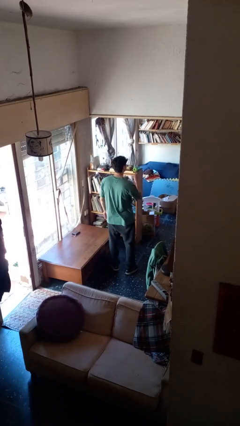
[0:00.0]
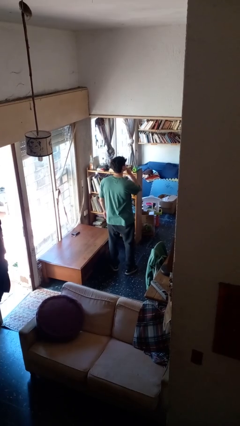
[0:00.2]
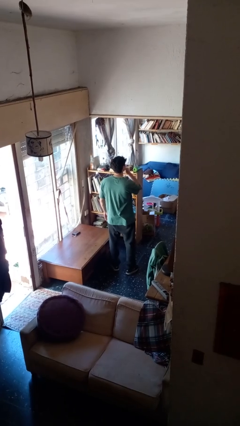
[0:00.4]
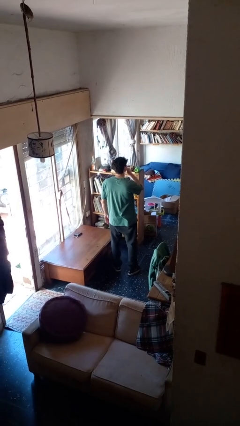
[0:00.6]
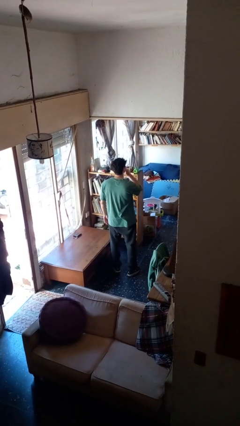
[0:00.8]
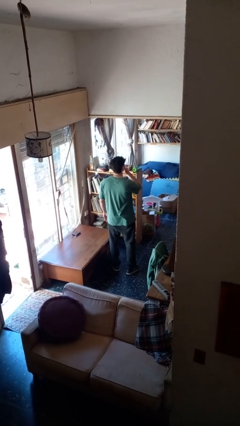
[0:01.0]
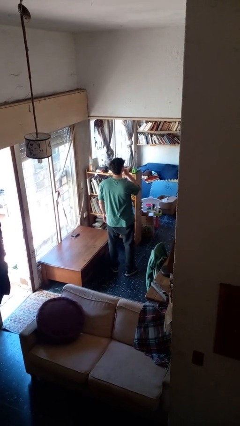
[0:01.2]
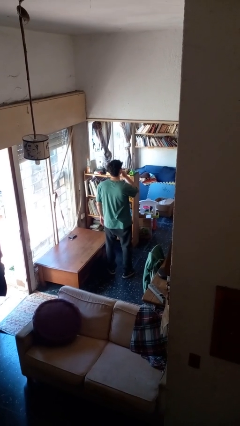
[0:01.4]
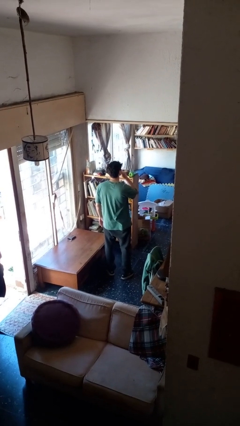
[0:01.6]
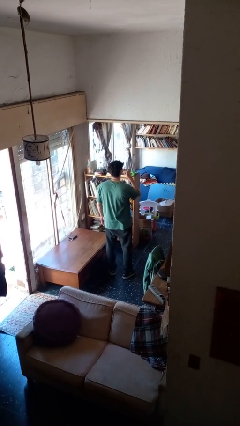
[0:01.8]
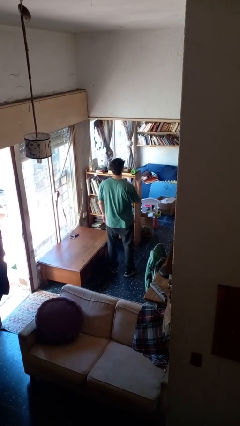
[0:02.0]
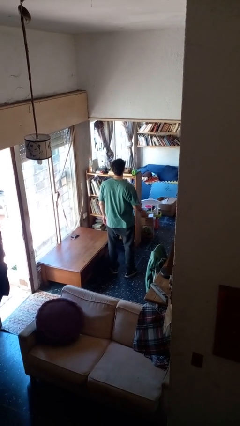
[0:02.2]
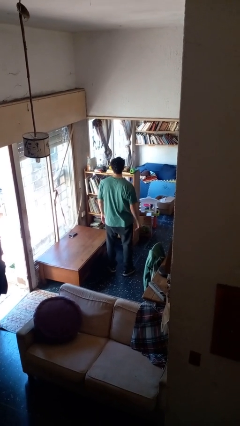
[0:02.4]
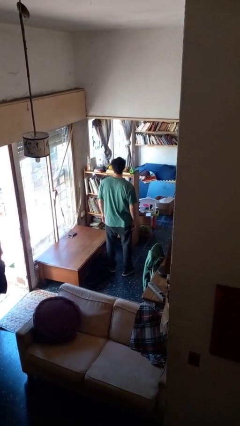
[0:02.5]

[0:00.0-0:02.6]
person gestures be quiet

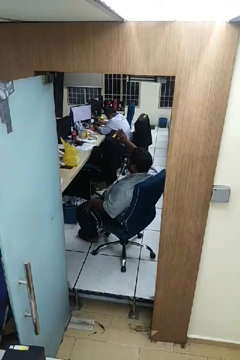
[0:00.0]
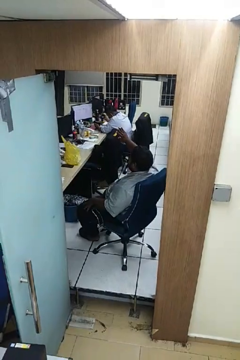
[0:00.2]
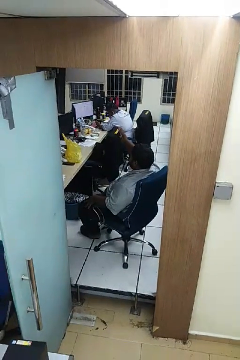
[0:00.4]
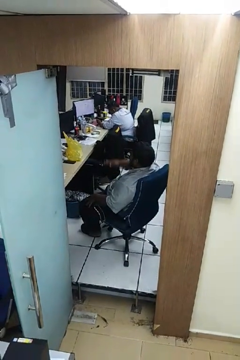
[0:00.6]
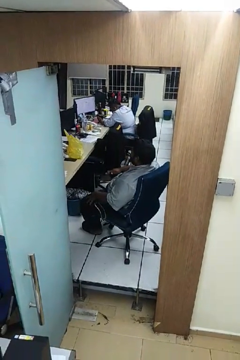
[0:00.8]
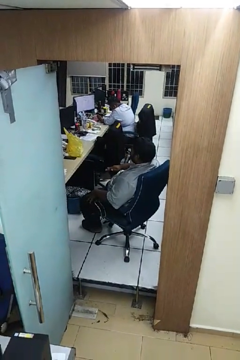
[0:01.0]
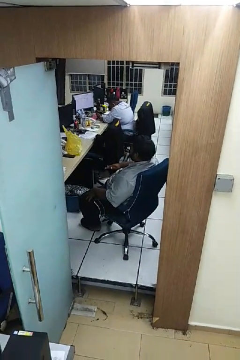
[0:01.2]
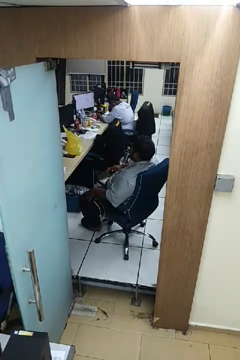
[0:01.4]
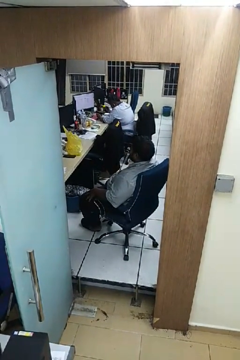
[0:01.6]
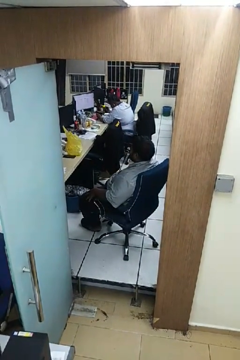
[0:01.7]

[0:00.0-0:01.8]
person gestures swipe down

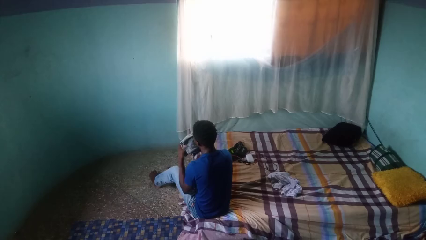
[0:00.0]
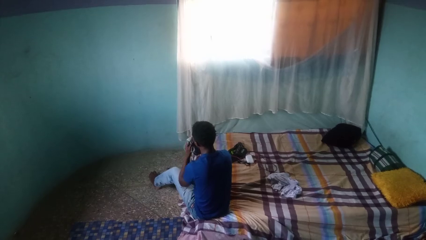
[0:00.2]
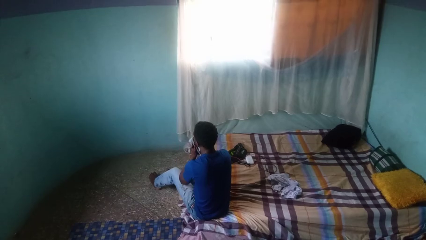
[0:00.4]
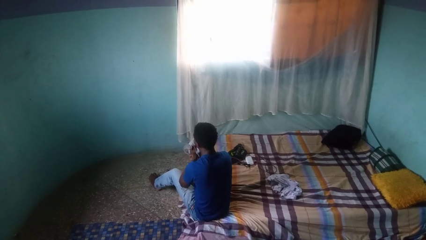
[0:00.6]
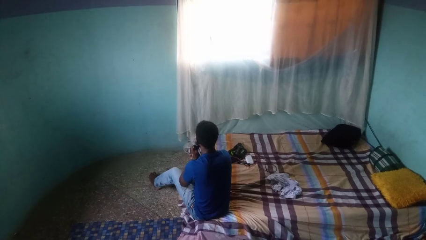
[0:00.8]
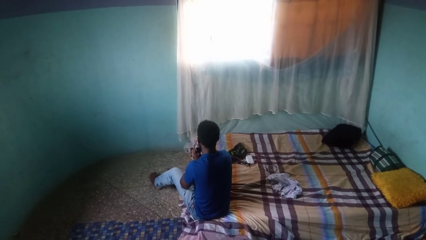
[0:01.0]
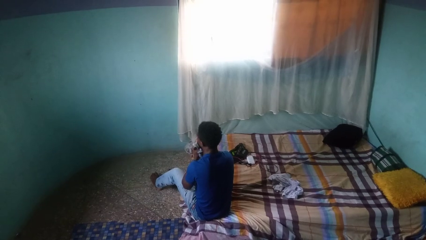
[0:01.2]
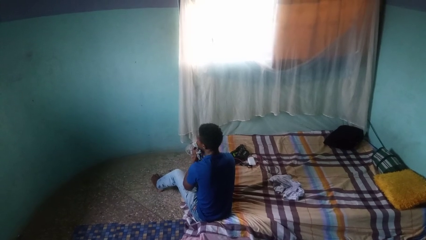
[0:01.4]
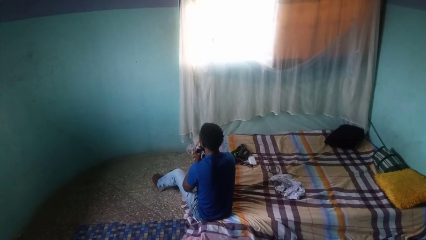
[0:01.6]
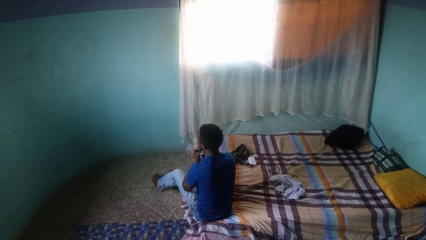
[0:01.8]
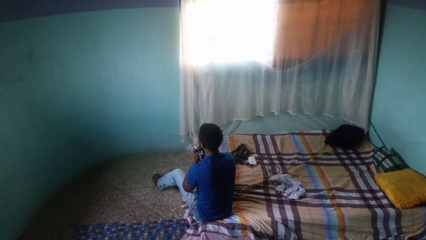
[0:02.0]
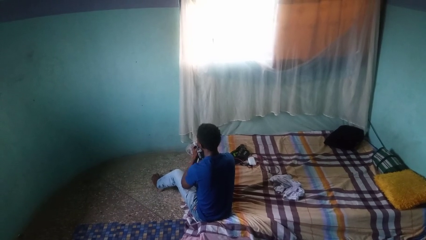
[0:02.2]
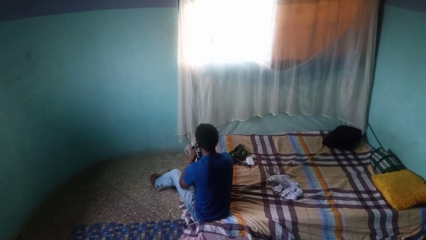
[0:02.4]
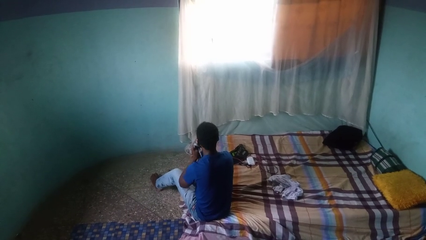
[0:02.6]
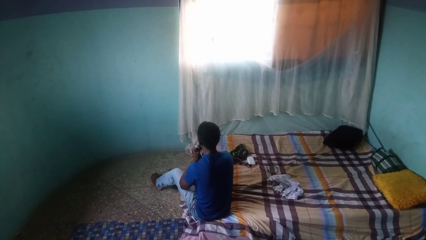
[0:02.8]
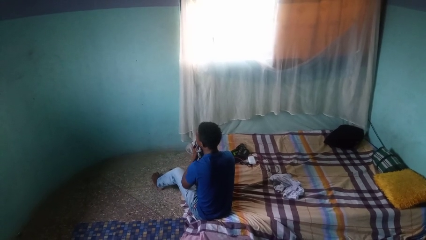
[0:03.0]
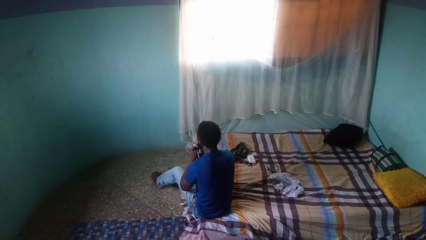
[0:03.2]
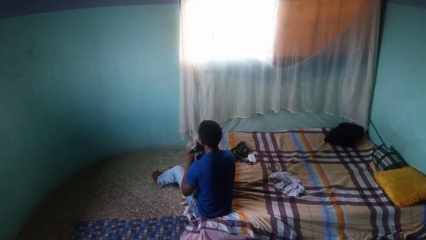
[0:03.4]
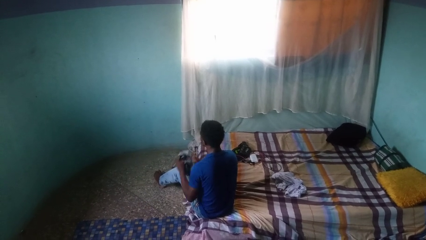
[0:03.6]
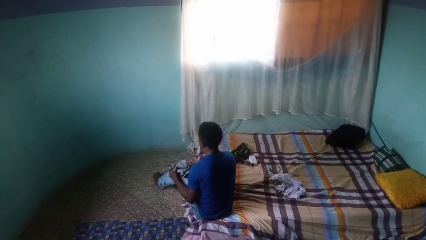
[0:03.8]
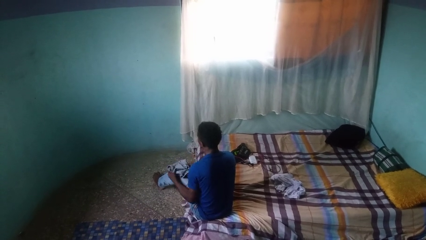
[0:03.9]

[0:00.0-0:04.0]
person wipes mouth with napkin

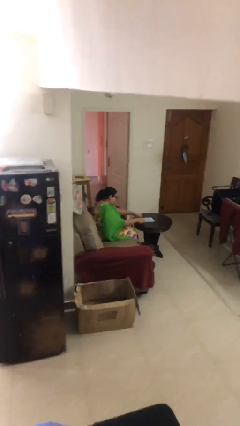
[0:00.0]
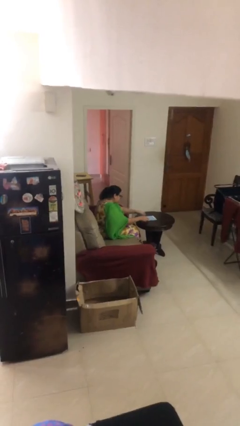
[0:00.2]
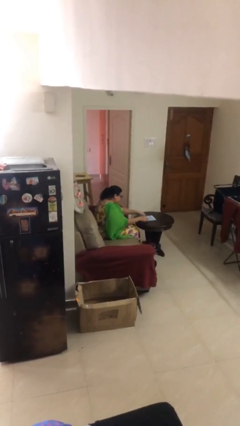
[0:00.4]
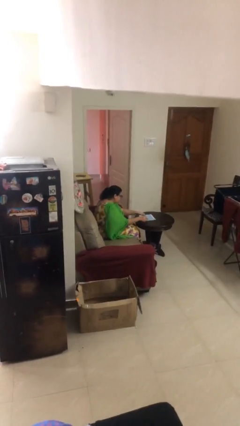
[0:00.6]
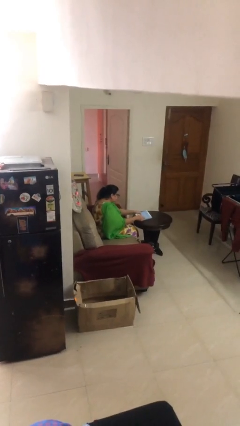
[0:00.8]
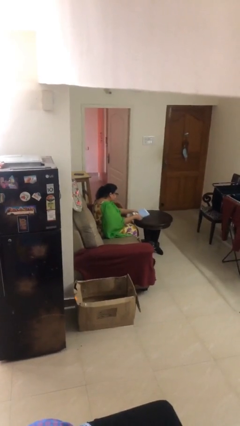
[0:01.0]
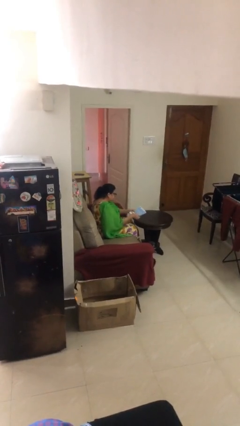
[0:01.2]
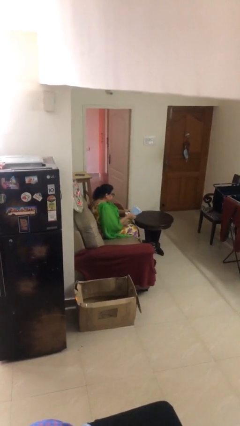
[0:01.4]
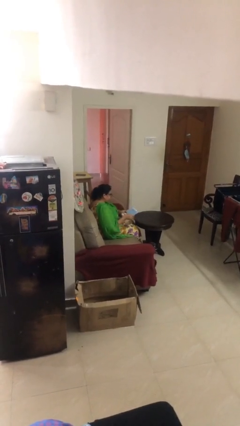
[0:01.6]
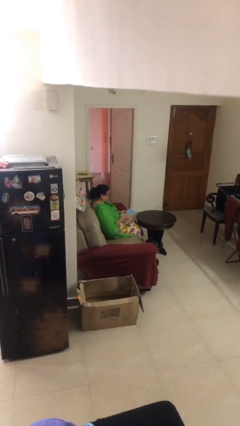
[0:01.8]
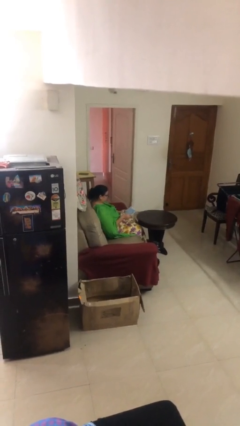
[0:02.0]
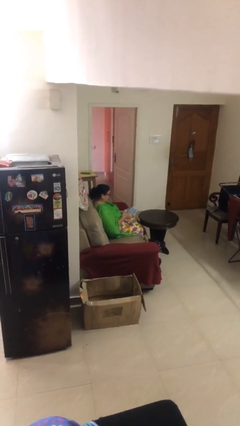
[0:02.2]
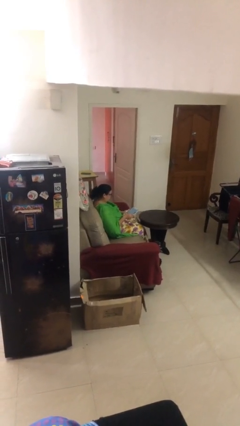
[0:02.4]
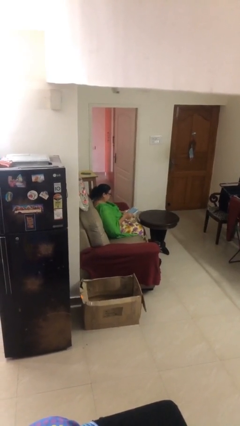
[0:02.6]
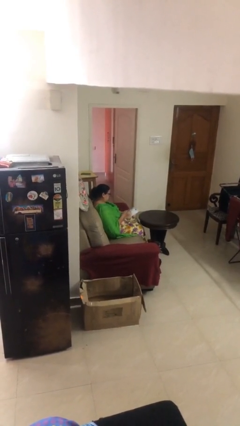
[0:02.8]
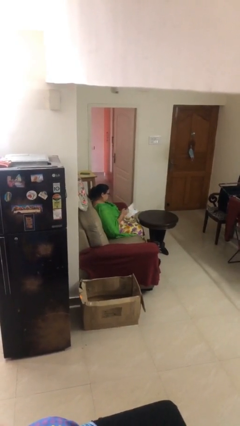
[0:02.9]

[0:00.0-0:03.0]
person picks up object from table

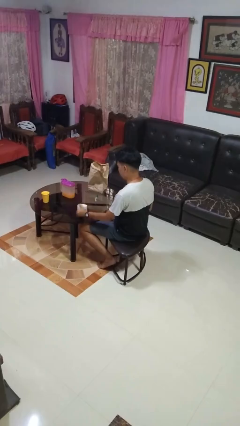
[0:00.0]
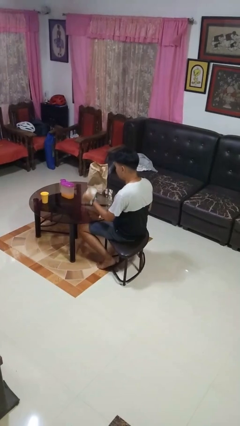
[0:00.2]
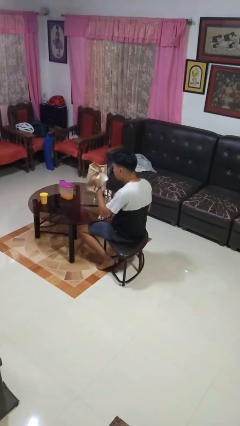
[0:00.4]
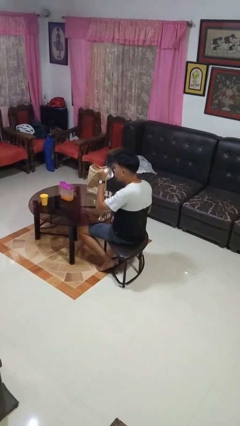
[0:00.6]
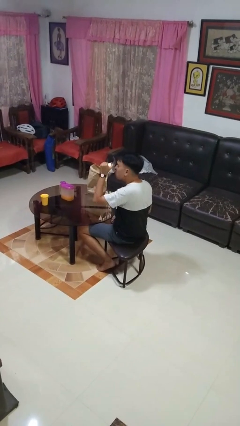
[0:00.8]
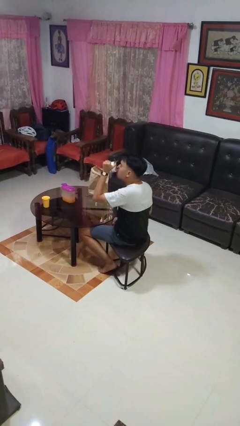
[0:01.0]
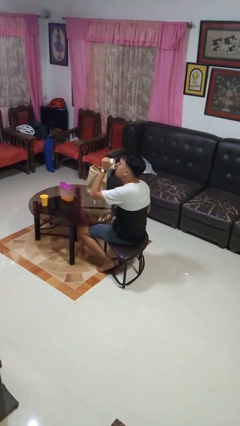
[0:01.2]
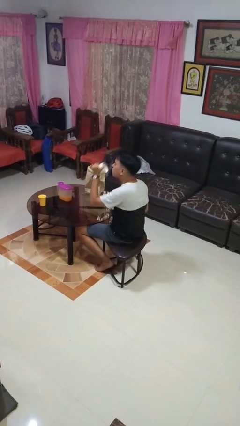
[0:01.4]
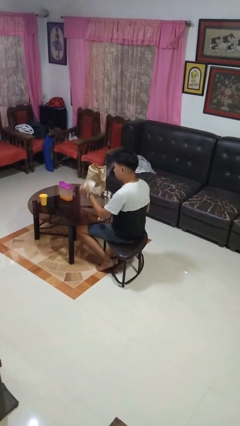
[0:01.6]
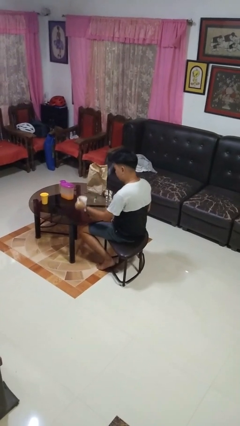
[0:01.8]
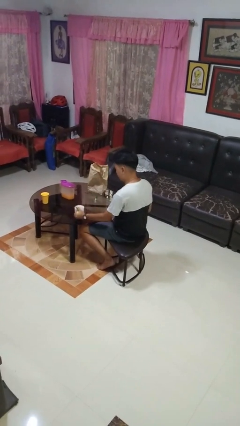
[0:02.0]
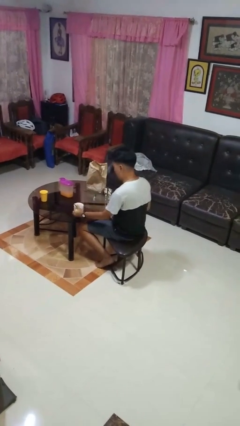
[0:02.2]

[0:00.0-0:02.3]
person drinks from mug

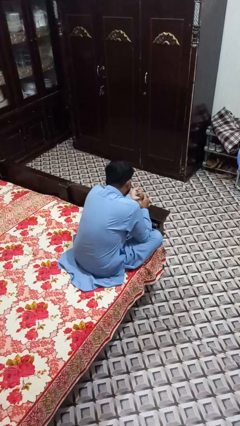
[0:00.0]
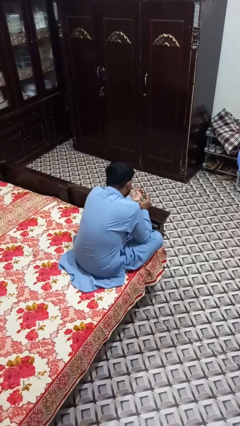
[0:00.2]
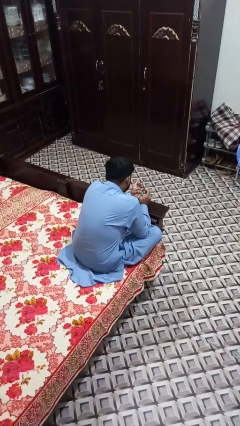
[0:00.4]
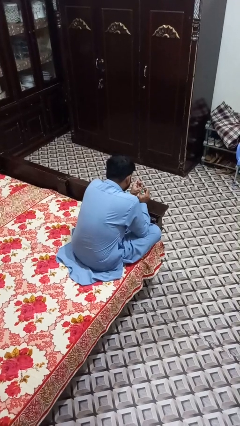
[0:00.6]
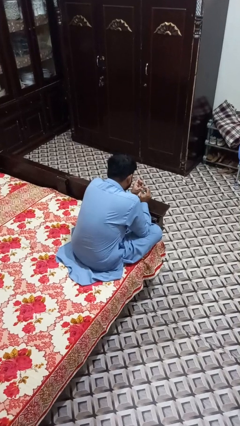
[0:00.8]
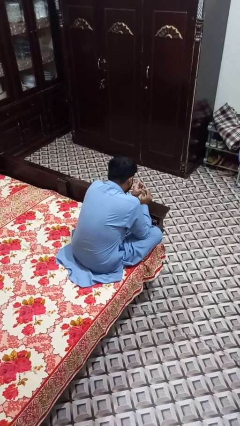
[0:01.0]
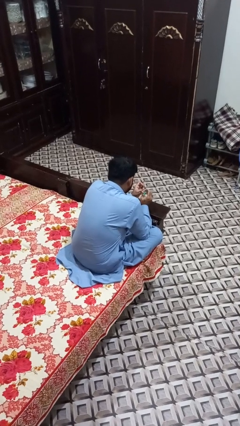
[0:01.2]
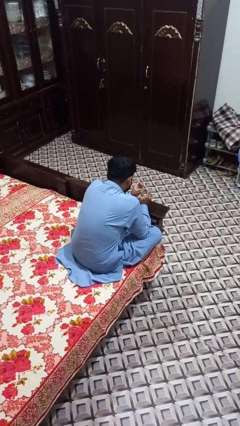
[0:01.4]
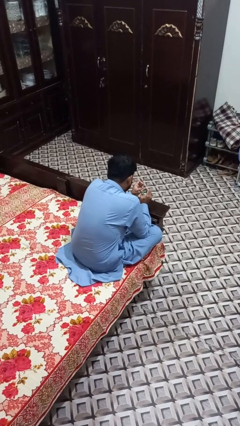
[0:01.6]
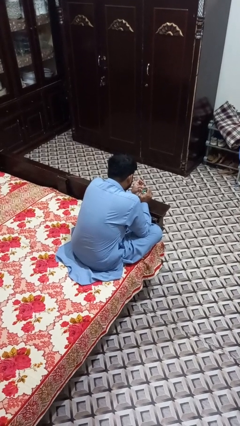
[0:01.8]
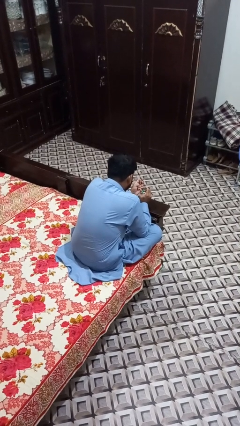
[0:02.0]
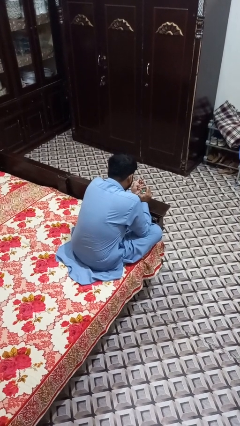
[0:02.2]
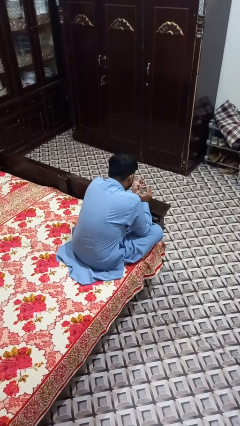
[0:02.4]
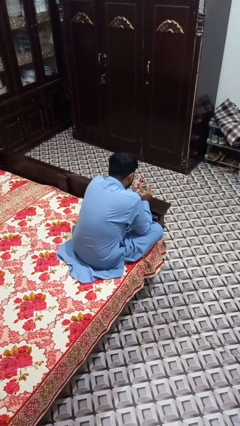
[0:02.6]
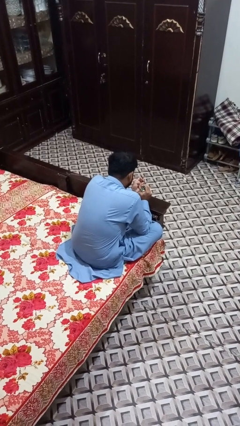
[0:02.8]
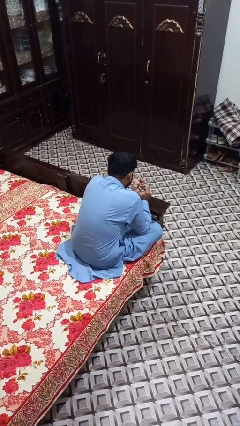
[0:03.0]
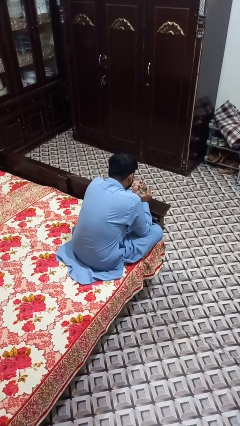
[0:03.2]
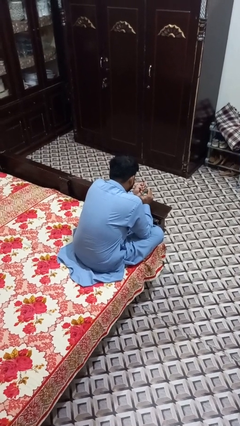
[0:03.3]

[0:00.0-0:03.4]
person clips fingernails

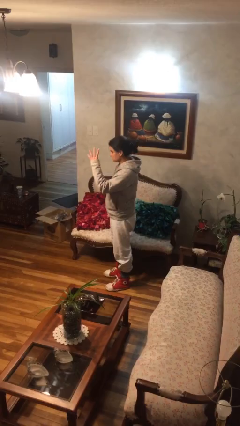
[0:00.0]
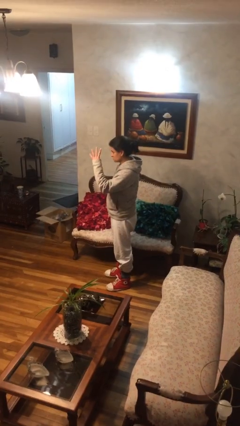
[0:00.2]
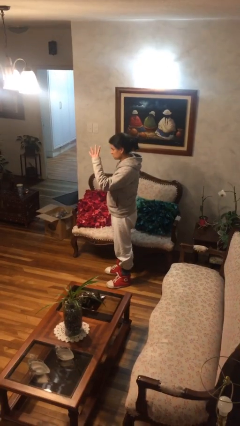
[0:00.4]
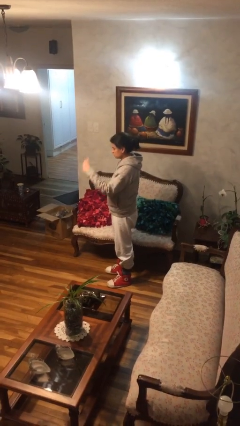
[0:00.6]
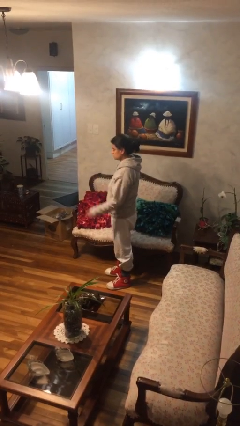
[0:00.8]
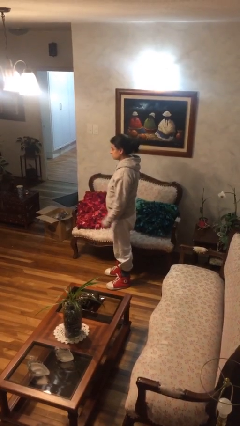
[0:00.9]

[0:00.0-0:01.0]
person gestures number four
